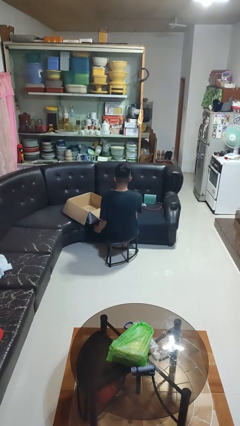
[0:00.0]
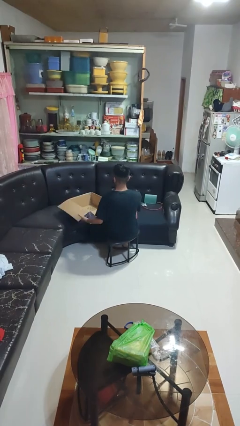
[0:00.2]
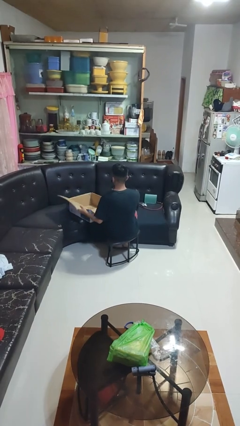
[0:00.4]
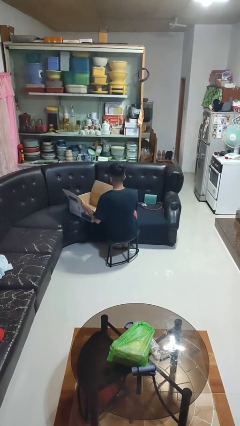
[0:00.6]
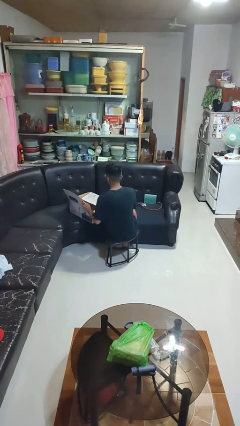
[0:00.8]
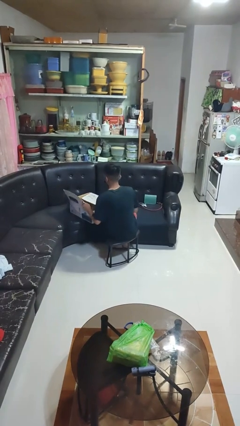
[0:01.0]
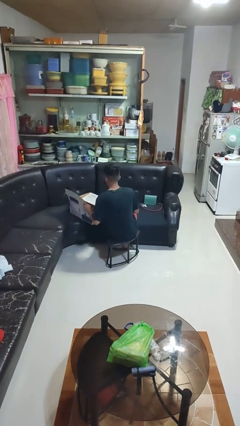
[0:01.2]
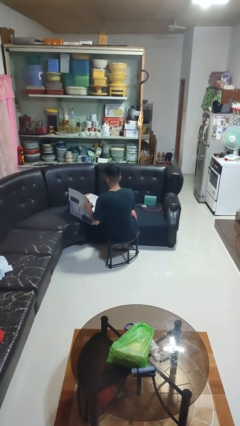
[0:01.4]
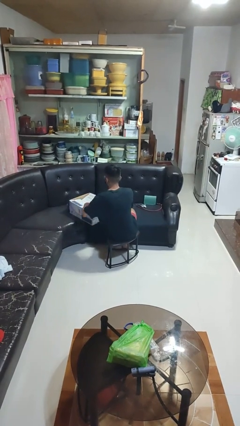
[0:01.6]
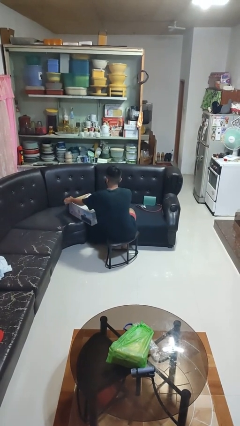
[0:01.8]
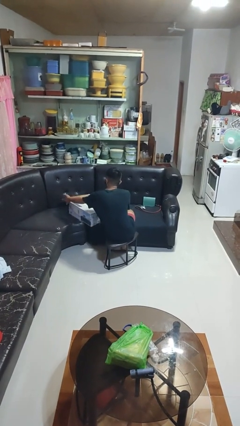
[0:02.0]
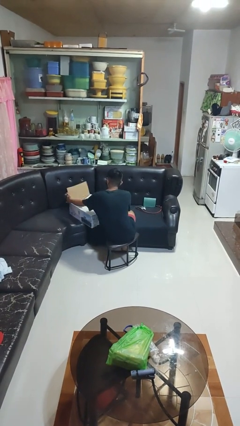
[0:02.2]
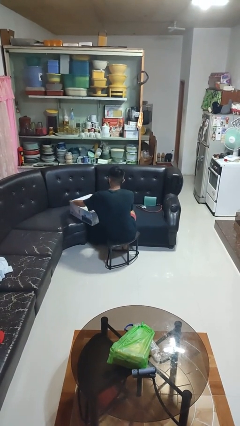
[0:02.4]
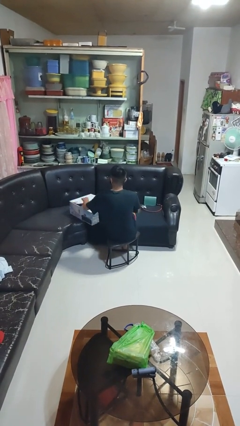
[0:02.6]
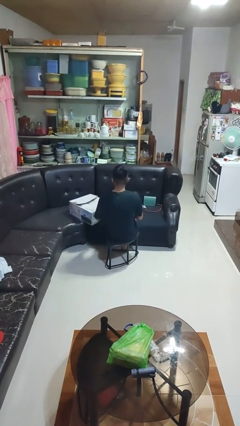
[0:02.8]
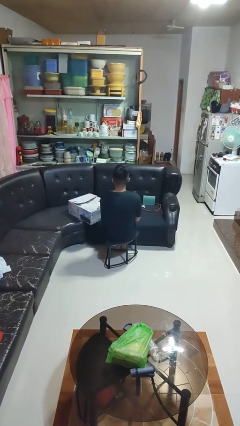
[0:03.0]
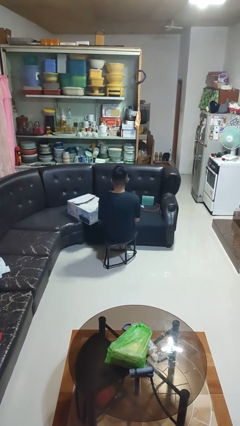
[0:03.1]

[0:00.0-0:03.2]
person closes box

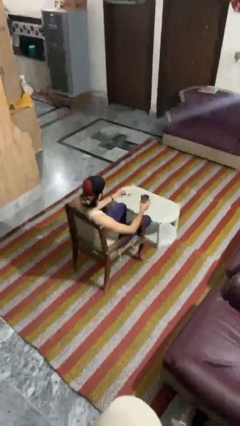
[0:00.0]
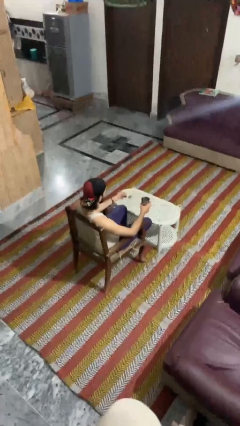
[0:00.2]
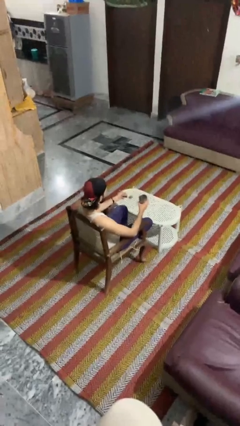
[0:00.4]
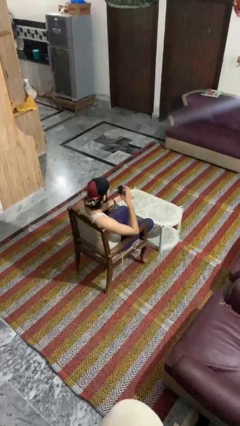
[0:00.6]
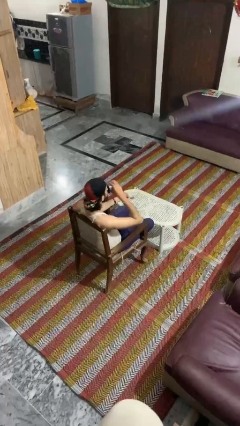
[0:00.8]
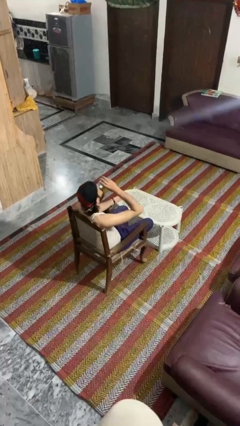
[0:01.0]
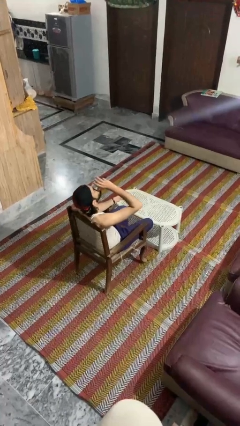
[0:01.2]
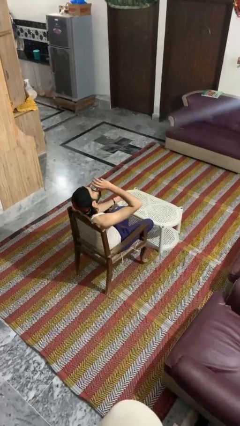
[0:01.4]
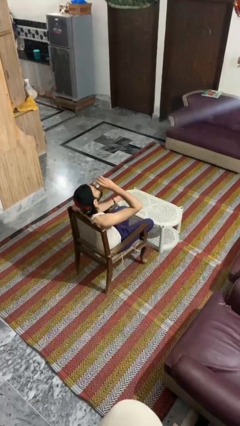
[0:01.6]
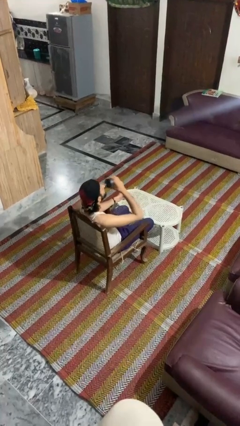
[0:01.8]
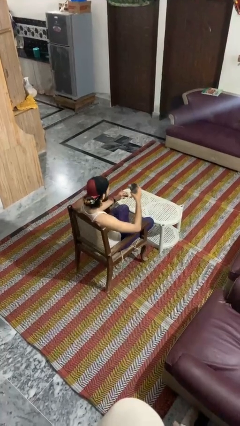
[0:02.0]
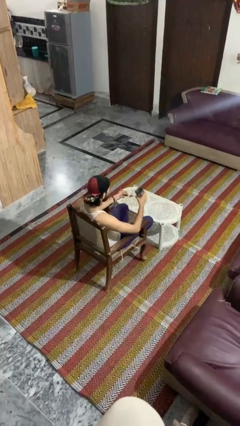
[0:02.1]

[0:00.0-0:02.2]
person drinks from mug

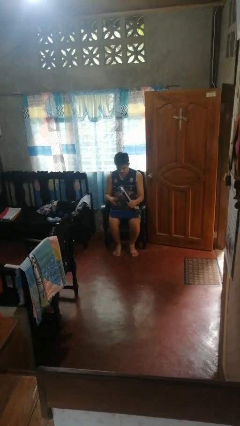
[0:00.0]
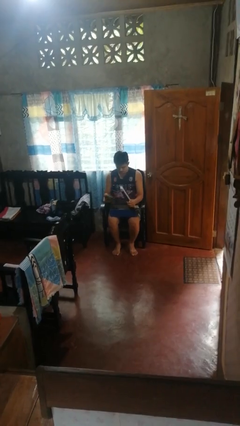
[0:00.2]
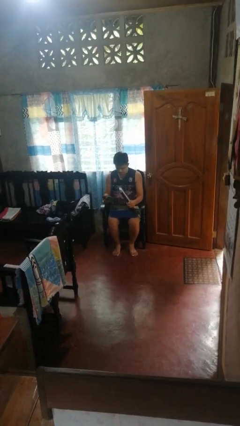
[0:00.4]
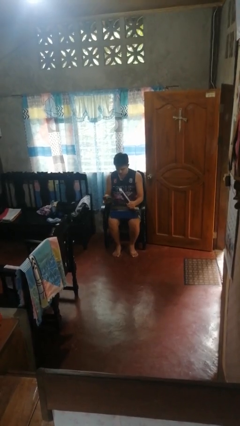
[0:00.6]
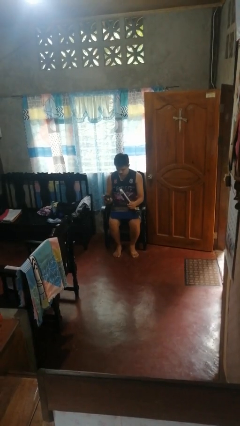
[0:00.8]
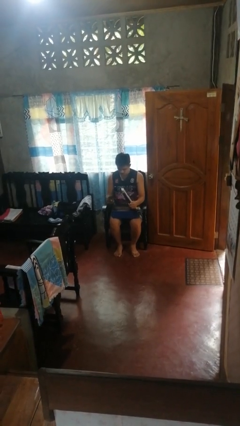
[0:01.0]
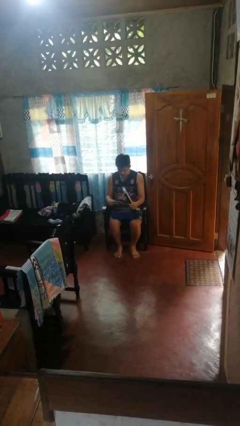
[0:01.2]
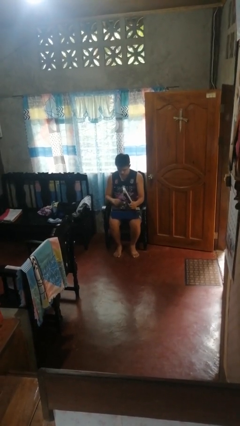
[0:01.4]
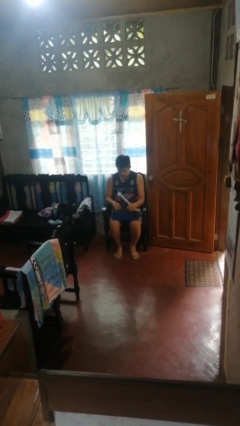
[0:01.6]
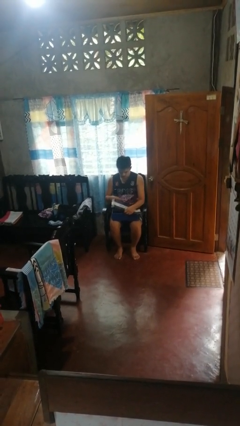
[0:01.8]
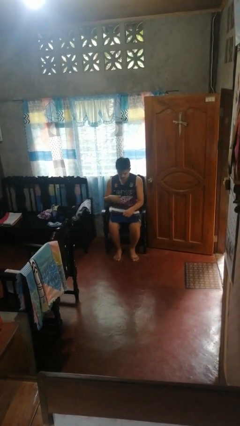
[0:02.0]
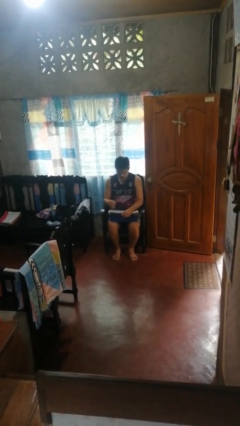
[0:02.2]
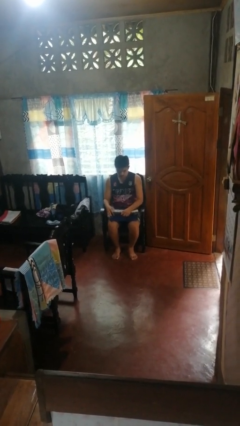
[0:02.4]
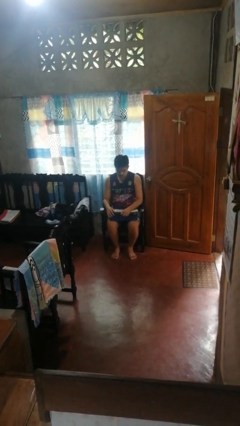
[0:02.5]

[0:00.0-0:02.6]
person puts object into box

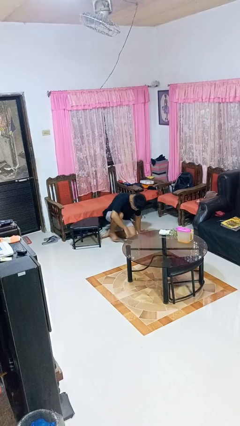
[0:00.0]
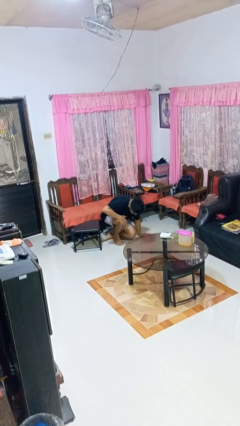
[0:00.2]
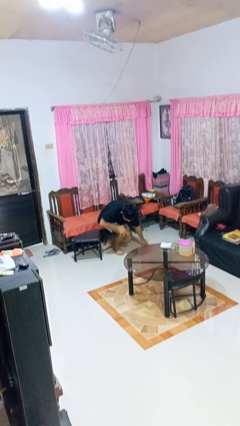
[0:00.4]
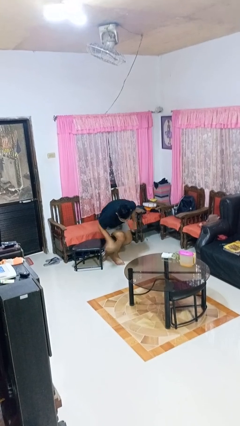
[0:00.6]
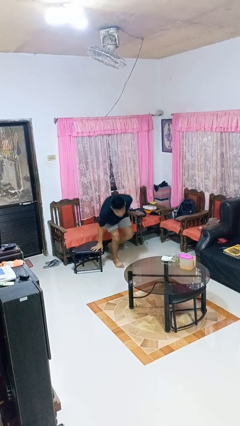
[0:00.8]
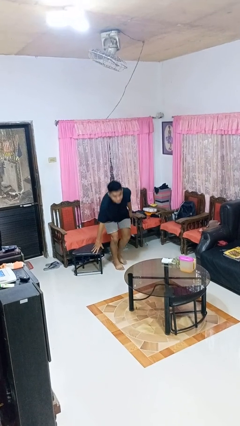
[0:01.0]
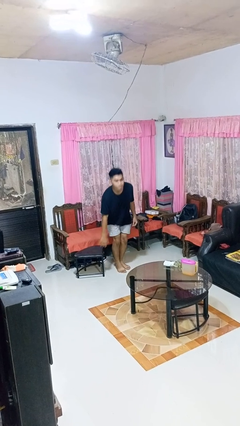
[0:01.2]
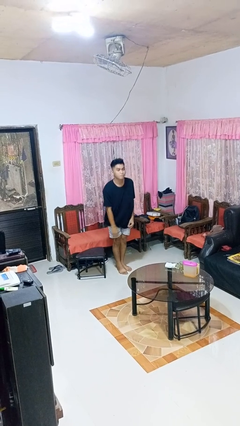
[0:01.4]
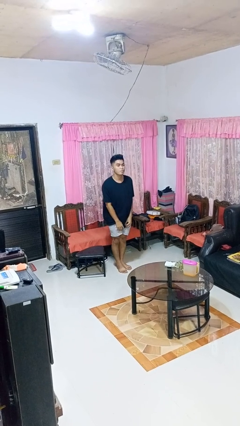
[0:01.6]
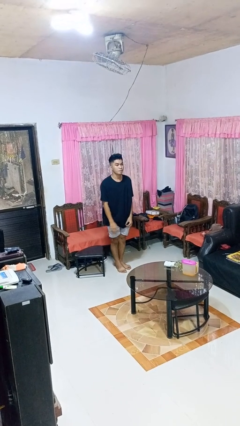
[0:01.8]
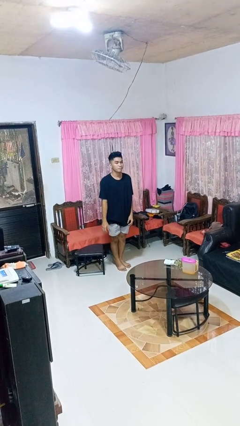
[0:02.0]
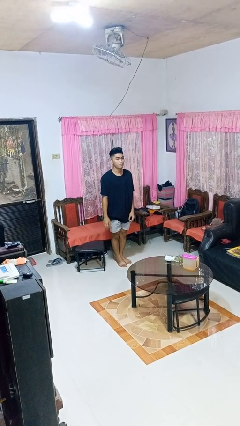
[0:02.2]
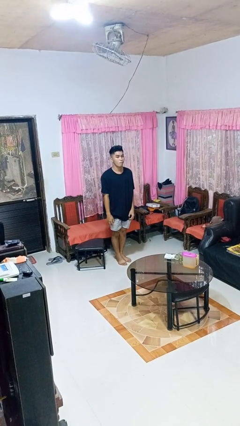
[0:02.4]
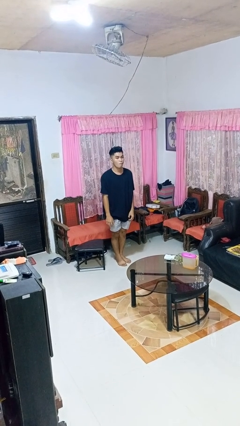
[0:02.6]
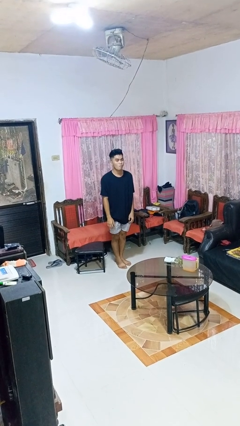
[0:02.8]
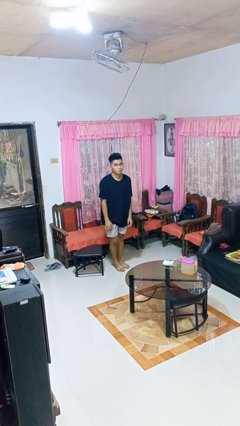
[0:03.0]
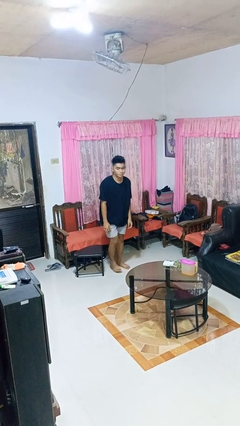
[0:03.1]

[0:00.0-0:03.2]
person stands up from floor

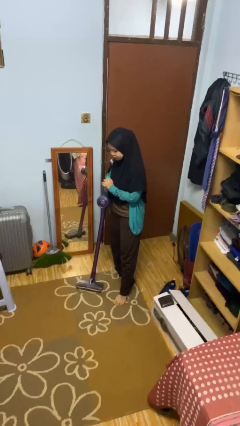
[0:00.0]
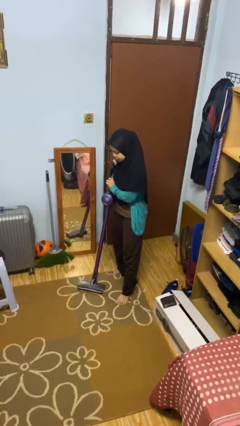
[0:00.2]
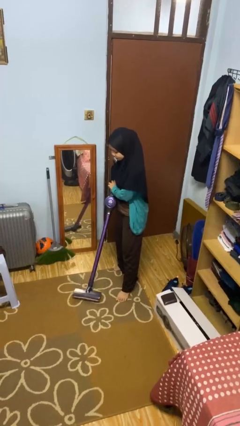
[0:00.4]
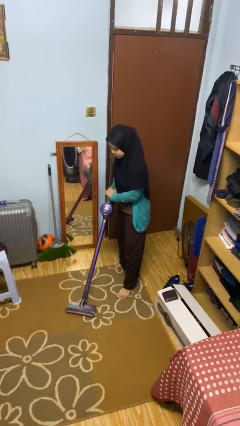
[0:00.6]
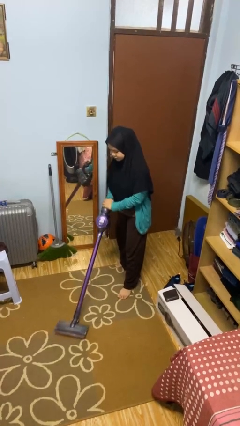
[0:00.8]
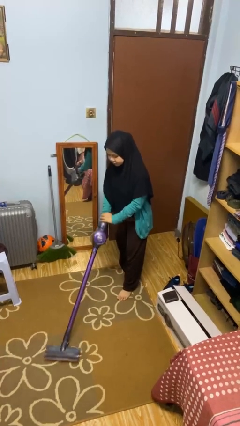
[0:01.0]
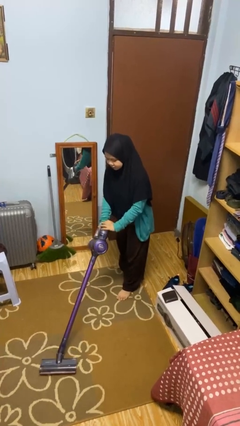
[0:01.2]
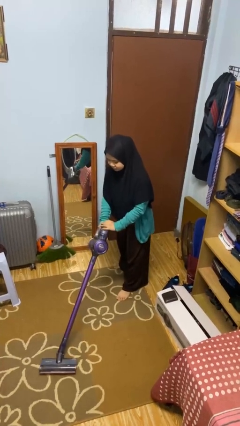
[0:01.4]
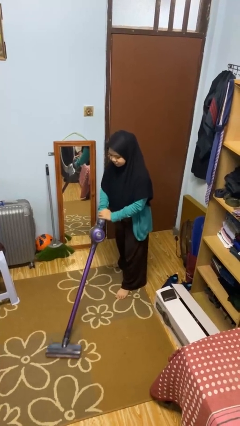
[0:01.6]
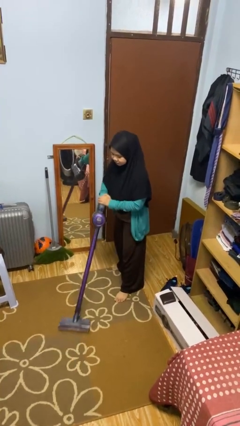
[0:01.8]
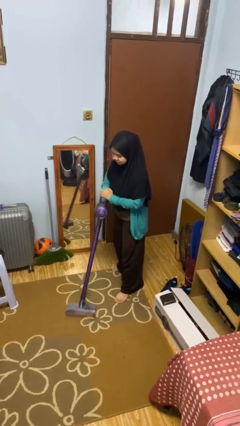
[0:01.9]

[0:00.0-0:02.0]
person vacuums carpet

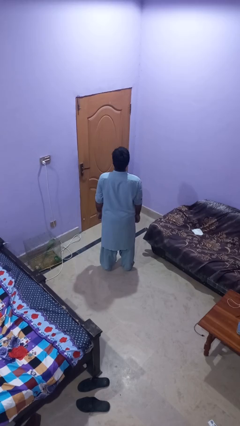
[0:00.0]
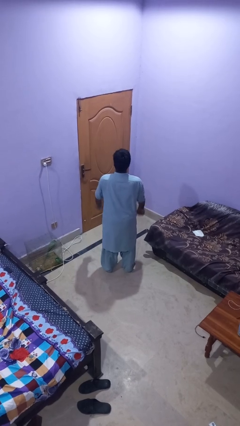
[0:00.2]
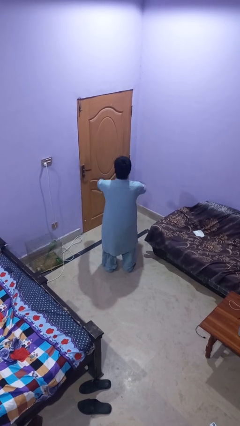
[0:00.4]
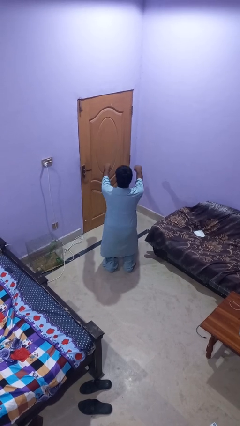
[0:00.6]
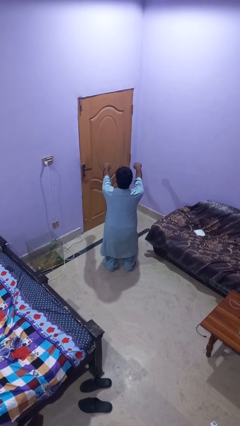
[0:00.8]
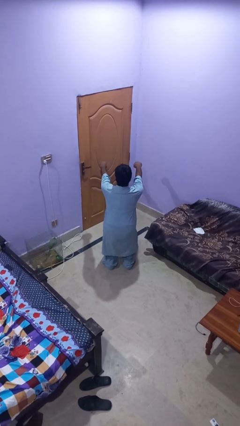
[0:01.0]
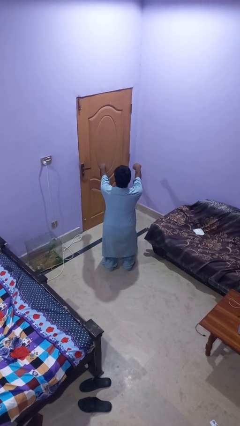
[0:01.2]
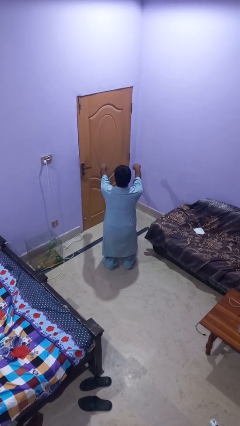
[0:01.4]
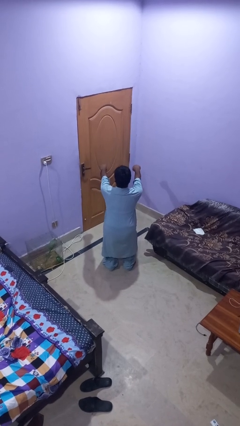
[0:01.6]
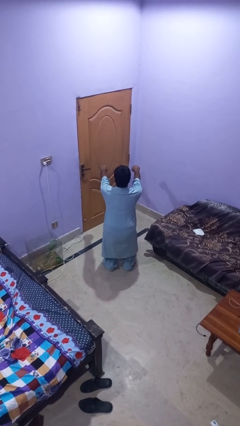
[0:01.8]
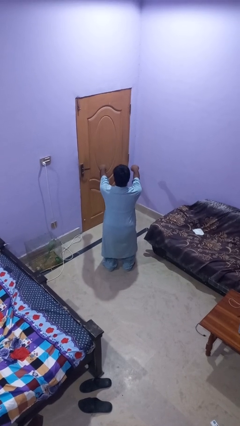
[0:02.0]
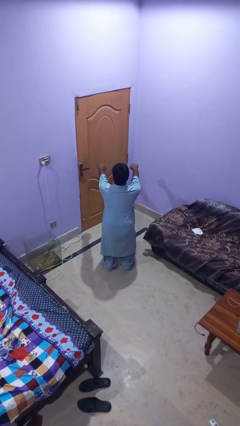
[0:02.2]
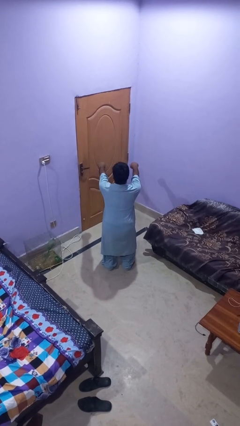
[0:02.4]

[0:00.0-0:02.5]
person squats

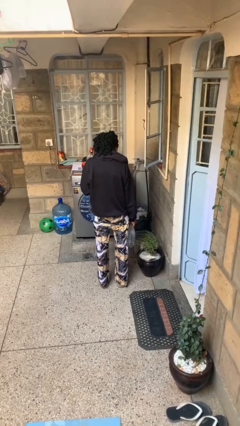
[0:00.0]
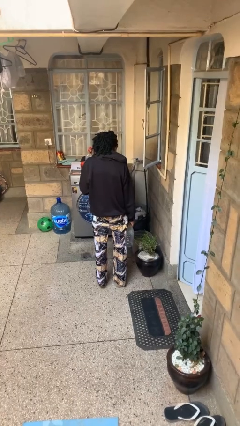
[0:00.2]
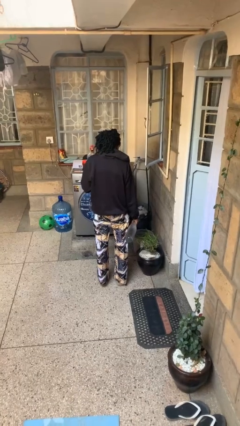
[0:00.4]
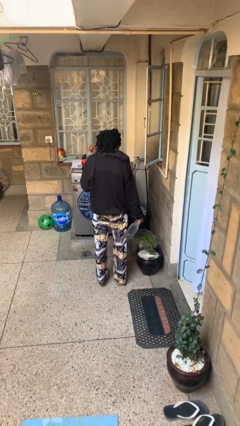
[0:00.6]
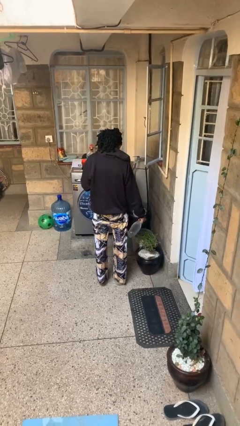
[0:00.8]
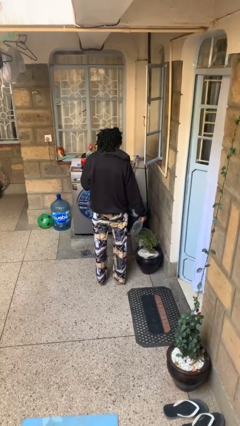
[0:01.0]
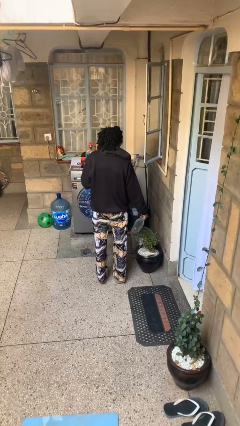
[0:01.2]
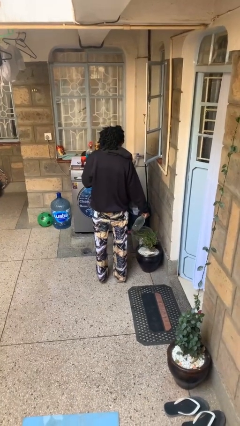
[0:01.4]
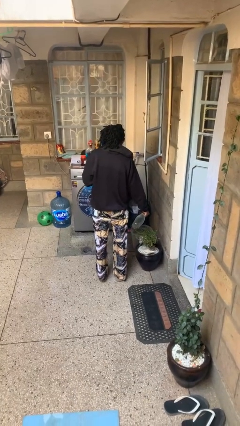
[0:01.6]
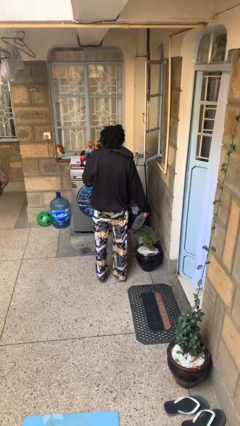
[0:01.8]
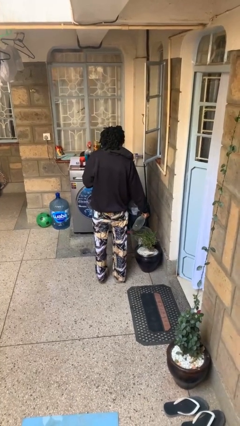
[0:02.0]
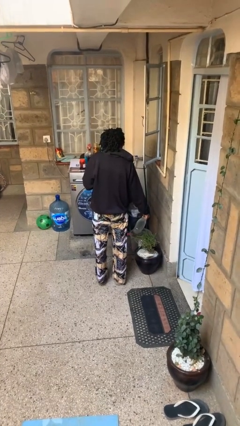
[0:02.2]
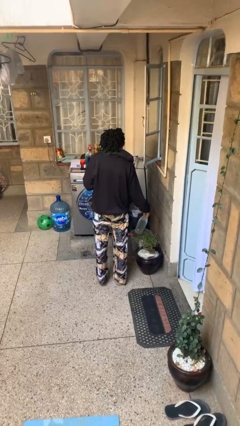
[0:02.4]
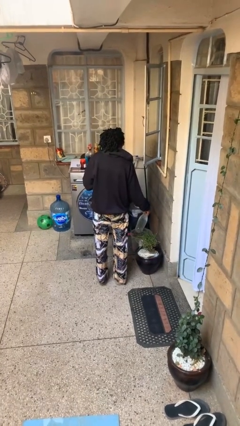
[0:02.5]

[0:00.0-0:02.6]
person waters houseplant
